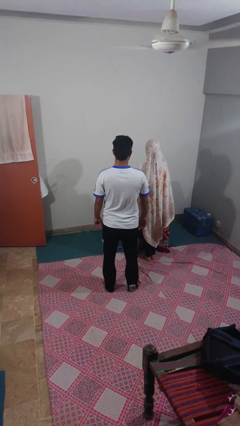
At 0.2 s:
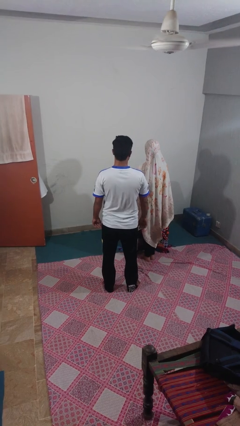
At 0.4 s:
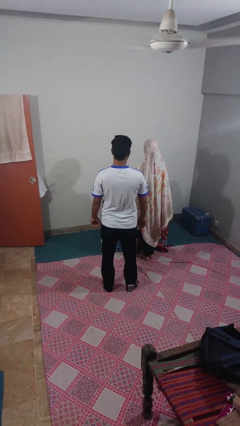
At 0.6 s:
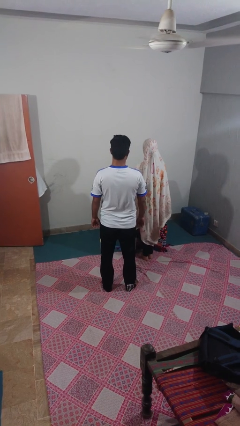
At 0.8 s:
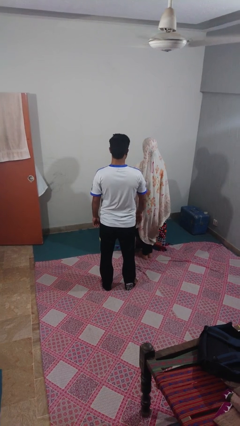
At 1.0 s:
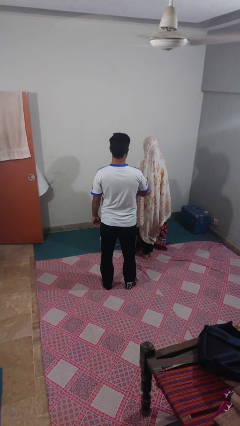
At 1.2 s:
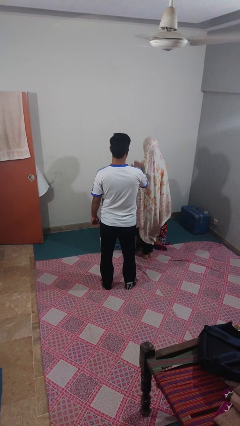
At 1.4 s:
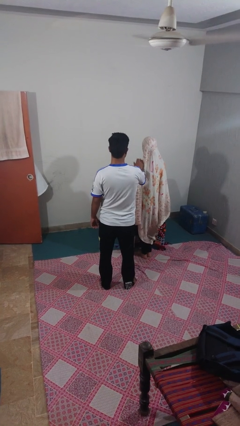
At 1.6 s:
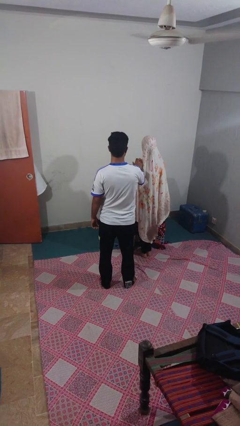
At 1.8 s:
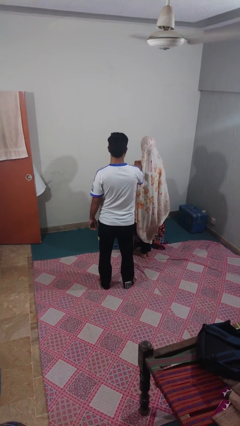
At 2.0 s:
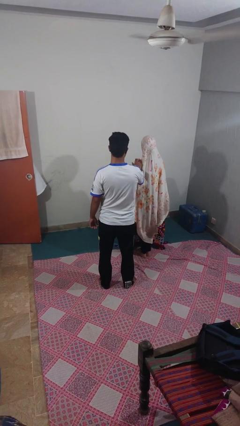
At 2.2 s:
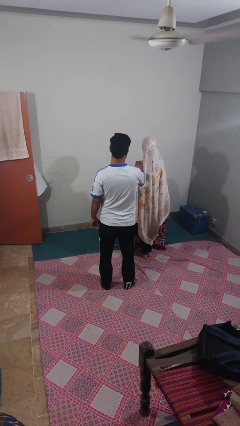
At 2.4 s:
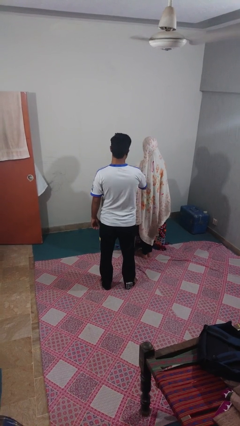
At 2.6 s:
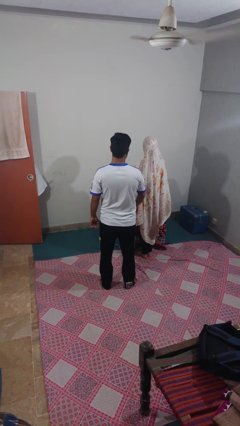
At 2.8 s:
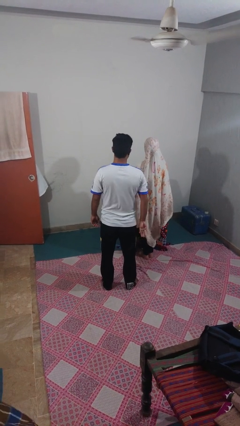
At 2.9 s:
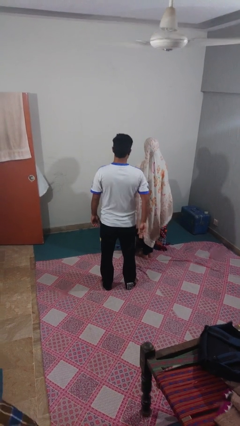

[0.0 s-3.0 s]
person touches back of person

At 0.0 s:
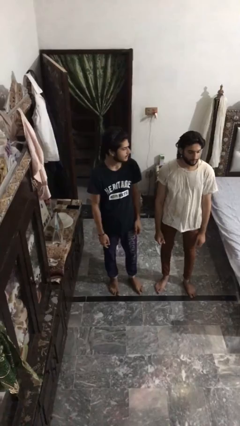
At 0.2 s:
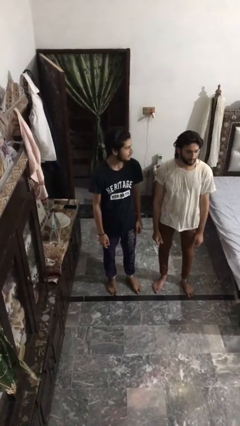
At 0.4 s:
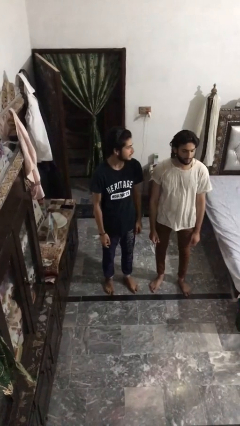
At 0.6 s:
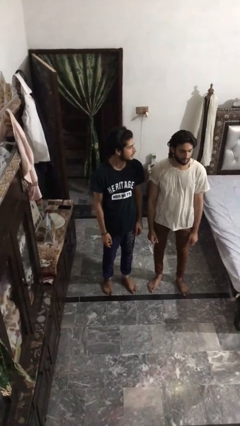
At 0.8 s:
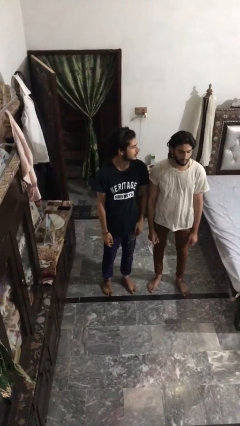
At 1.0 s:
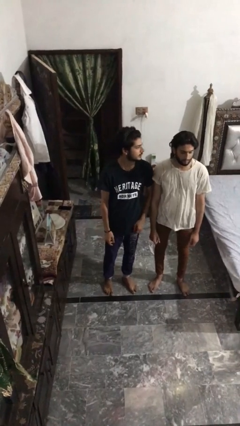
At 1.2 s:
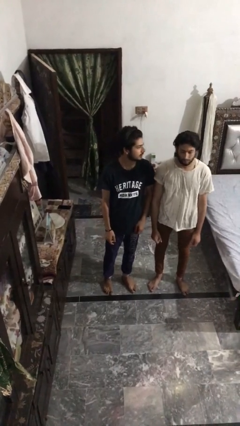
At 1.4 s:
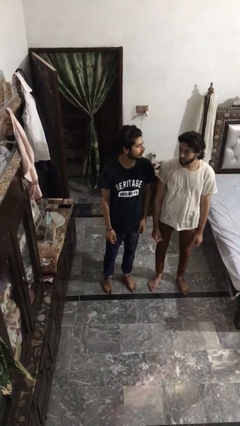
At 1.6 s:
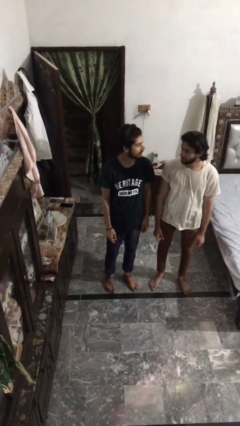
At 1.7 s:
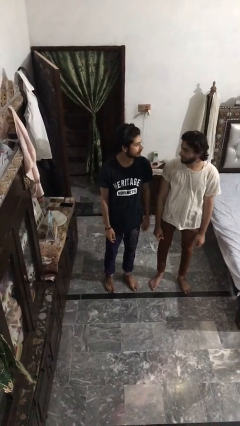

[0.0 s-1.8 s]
person nudges person with elbow

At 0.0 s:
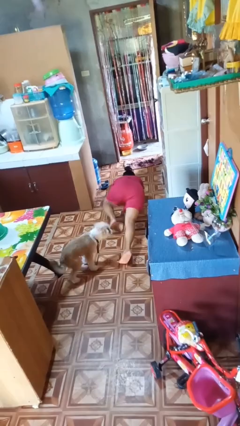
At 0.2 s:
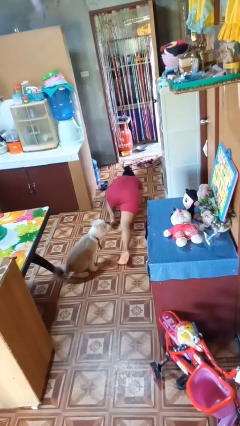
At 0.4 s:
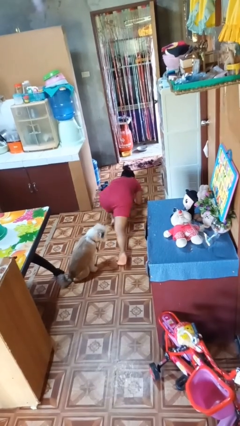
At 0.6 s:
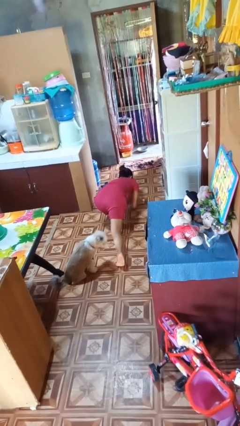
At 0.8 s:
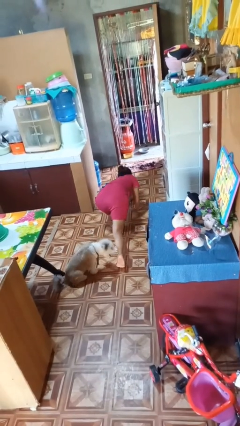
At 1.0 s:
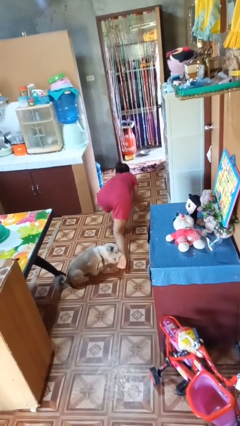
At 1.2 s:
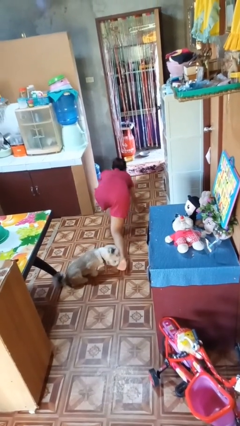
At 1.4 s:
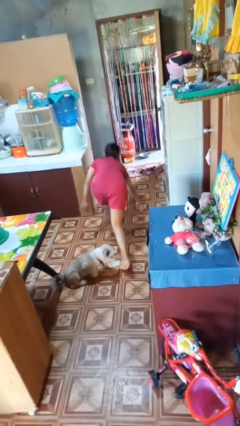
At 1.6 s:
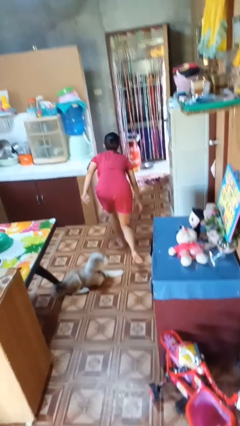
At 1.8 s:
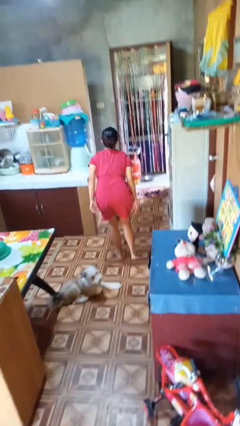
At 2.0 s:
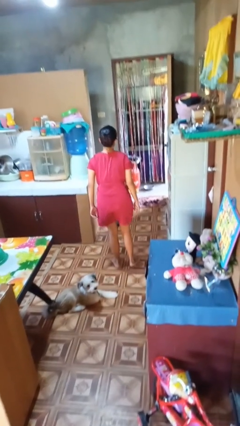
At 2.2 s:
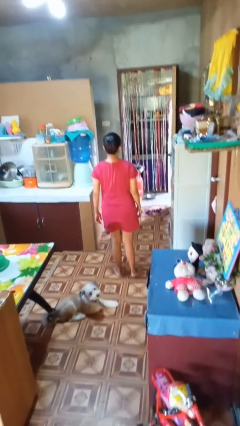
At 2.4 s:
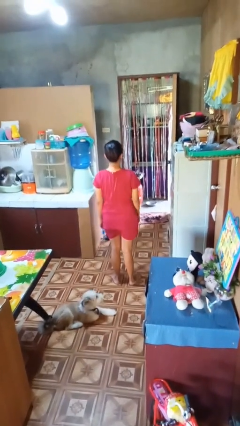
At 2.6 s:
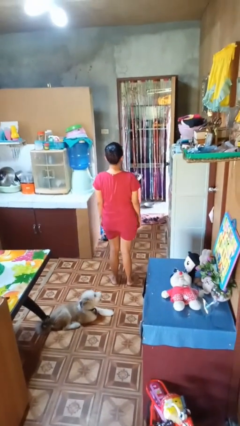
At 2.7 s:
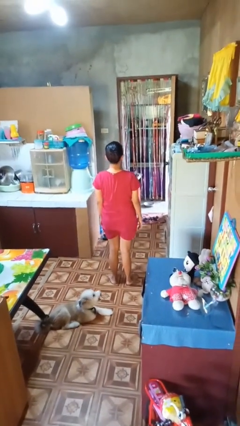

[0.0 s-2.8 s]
person stands up from floor

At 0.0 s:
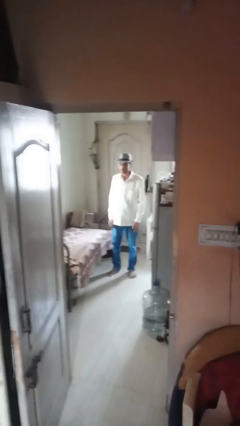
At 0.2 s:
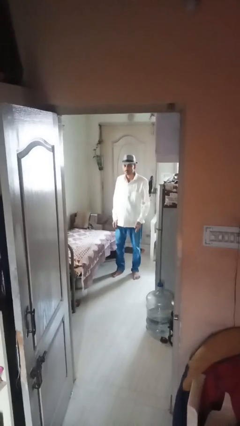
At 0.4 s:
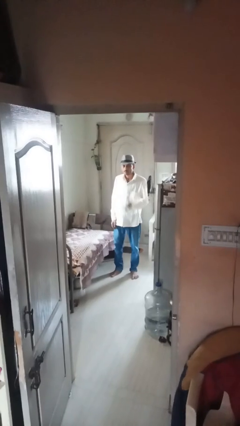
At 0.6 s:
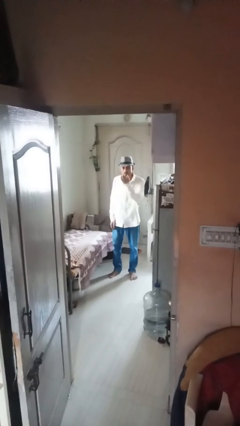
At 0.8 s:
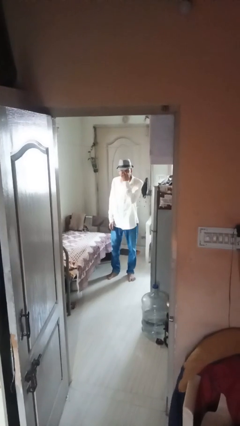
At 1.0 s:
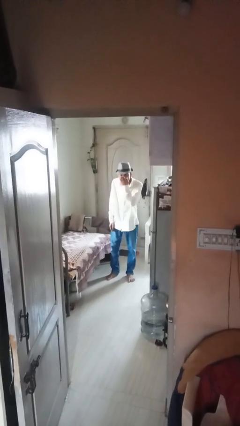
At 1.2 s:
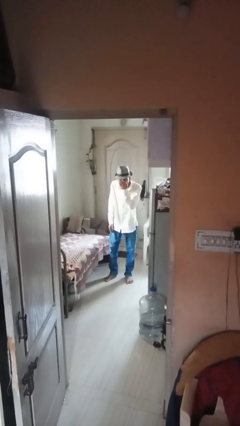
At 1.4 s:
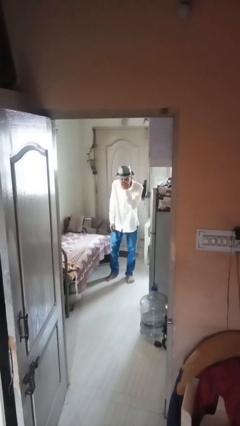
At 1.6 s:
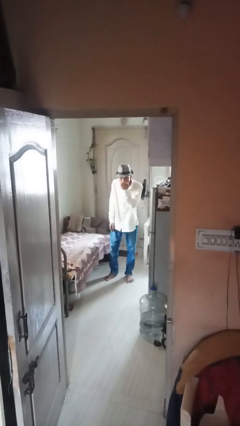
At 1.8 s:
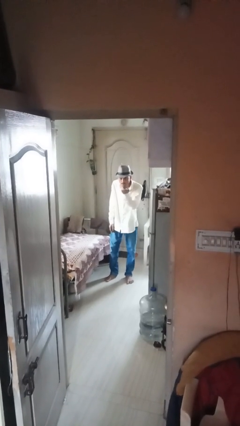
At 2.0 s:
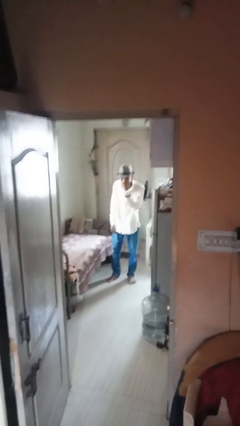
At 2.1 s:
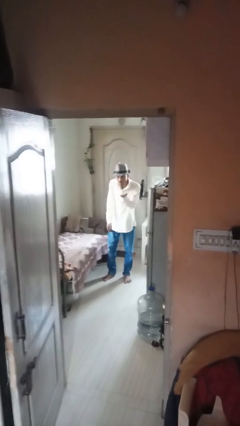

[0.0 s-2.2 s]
person gestures blow kiss

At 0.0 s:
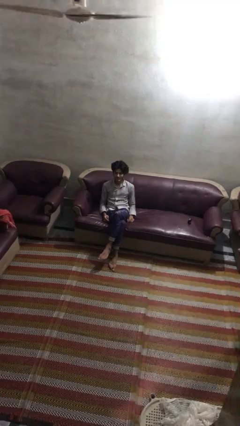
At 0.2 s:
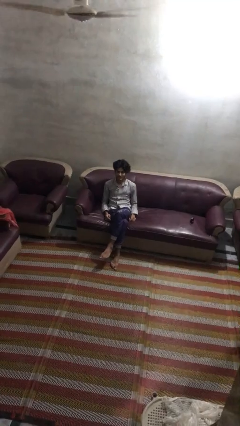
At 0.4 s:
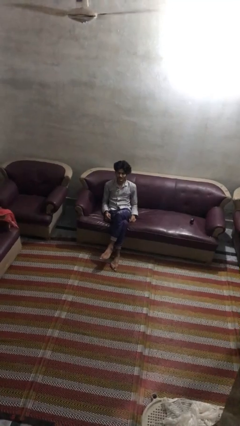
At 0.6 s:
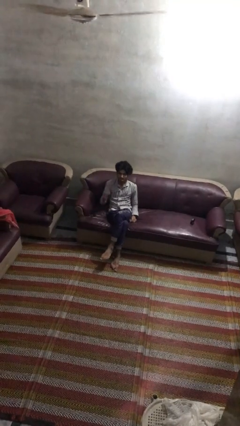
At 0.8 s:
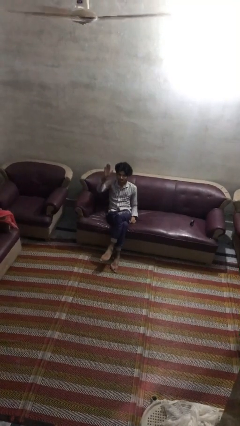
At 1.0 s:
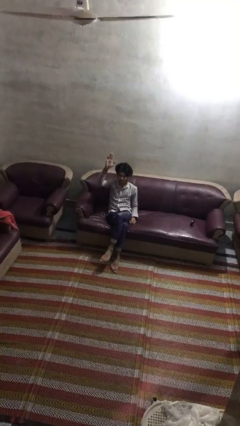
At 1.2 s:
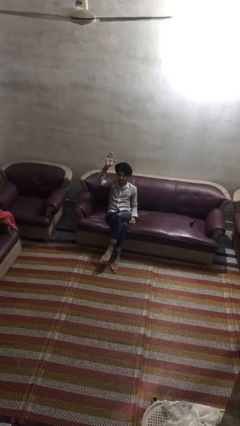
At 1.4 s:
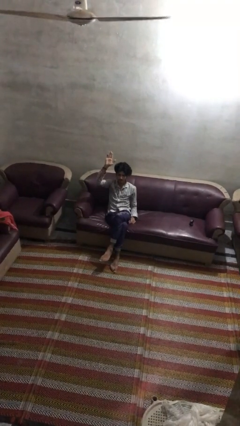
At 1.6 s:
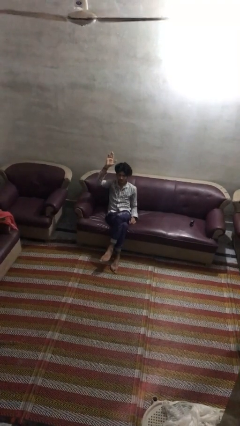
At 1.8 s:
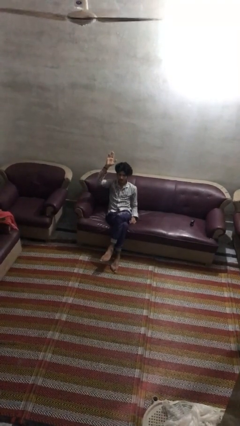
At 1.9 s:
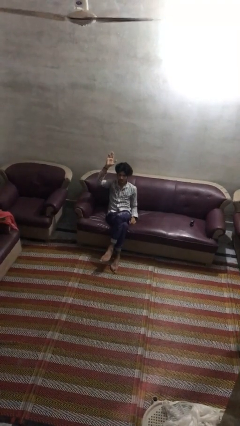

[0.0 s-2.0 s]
person gestures raise hand

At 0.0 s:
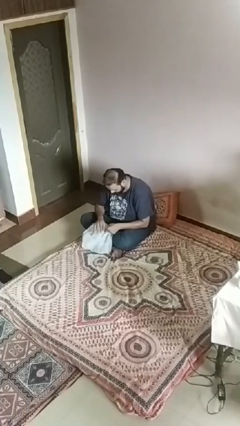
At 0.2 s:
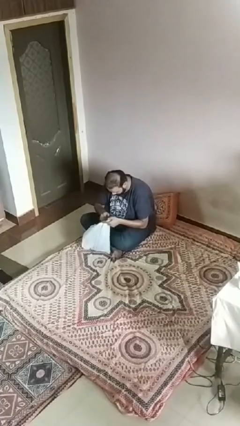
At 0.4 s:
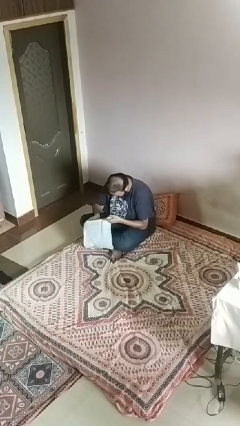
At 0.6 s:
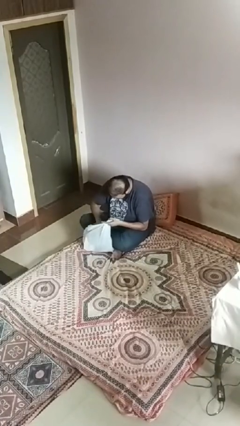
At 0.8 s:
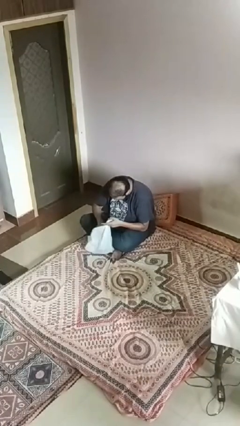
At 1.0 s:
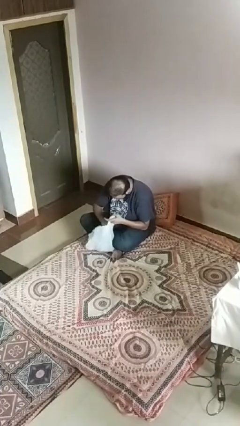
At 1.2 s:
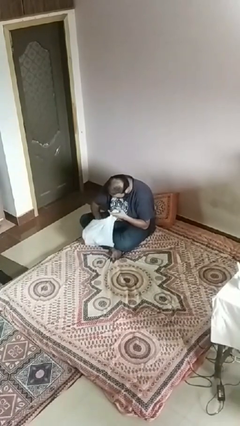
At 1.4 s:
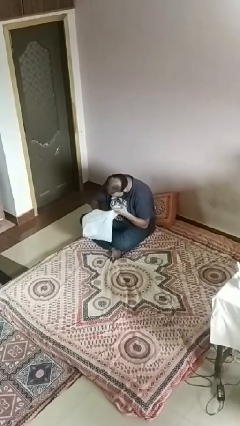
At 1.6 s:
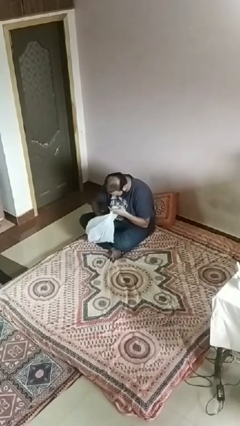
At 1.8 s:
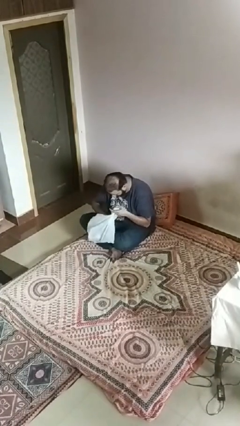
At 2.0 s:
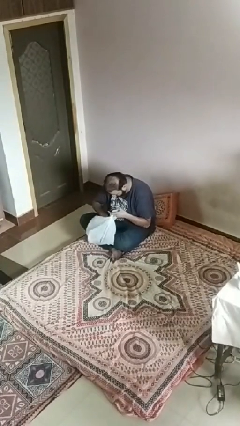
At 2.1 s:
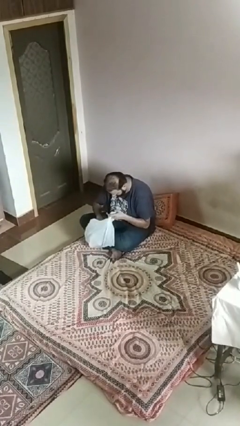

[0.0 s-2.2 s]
person searches in bag

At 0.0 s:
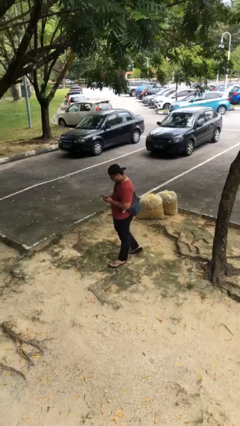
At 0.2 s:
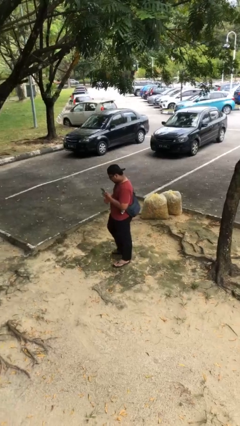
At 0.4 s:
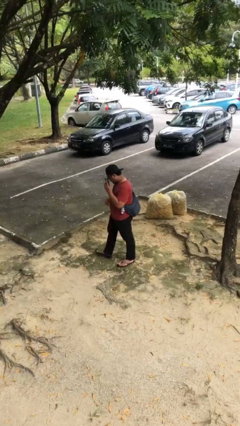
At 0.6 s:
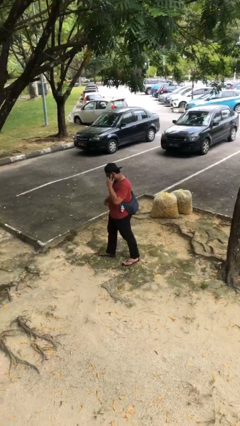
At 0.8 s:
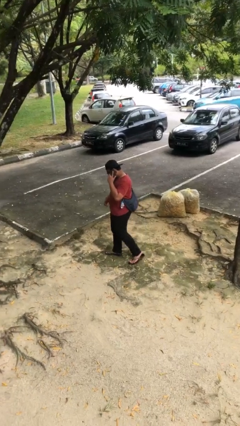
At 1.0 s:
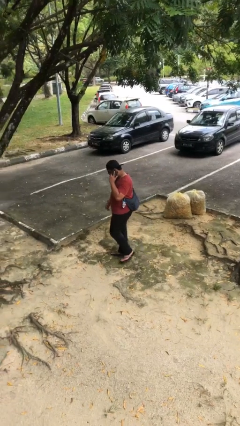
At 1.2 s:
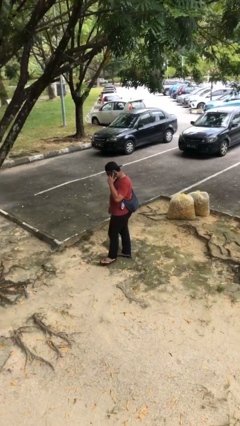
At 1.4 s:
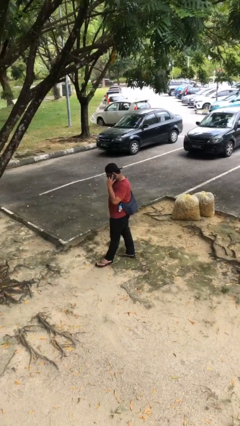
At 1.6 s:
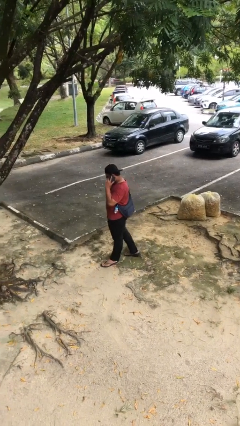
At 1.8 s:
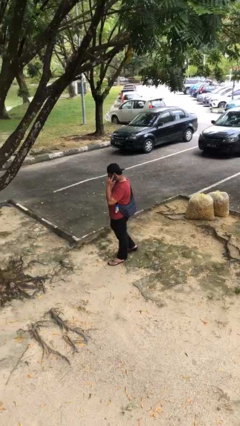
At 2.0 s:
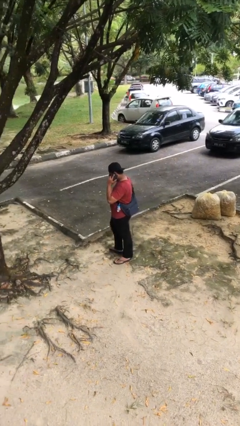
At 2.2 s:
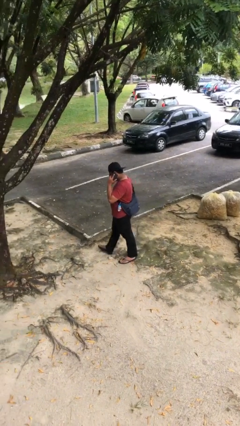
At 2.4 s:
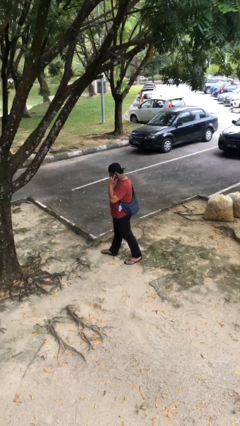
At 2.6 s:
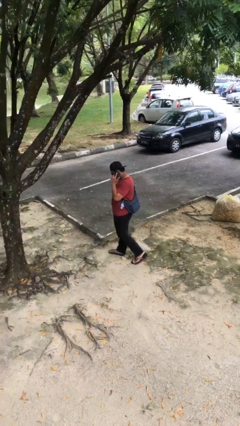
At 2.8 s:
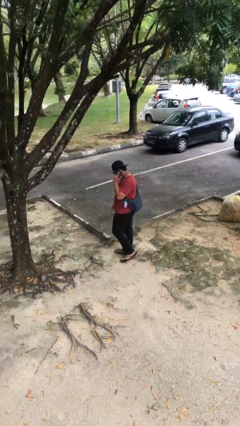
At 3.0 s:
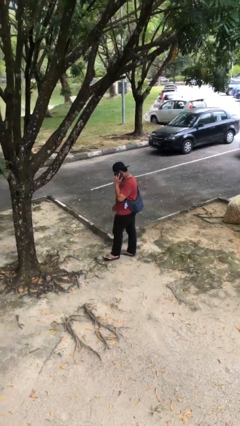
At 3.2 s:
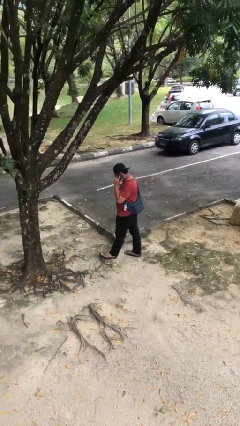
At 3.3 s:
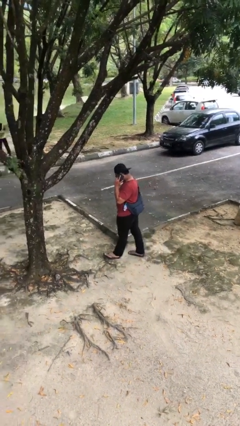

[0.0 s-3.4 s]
person talks on phone

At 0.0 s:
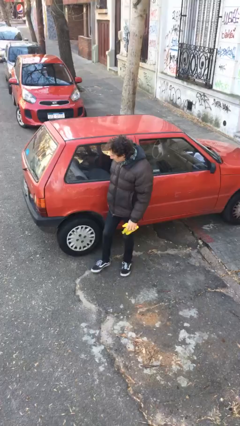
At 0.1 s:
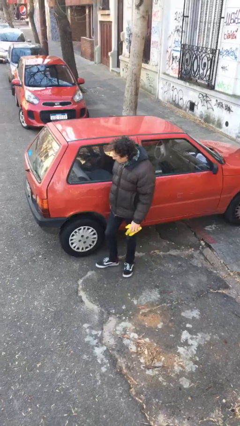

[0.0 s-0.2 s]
person polishes car with rag
